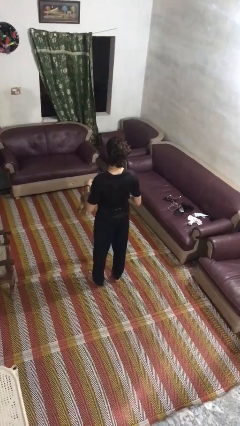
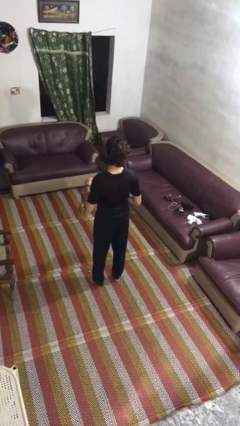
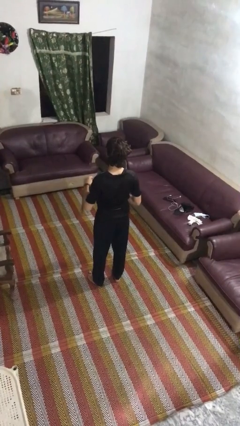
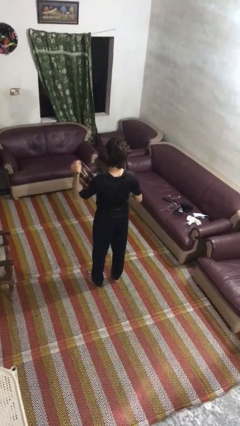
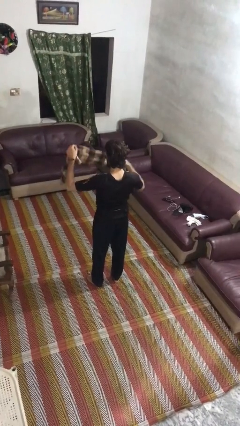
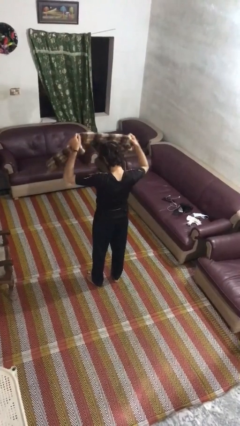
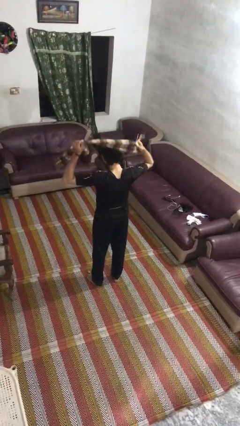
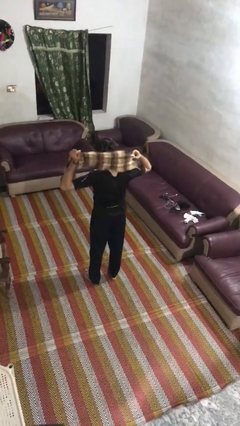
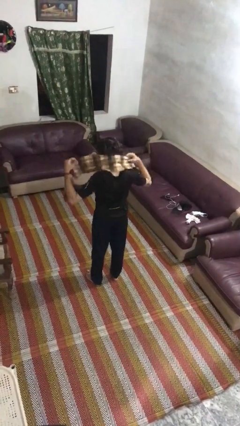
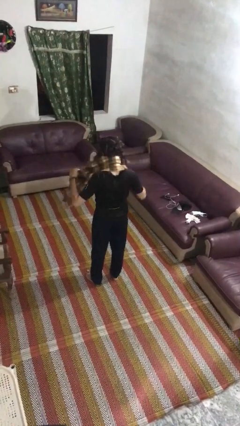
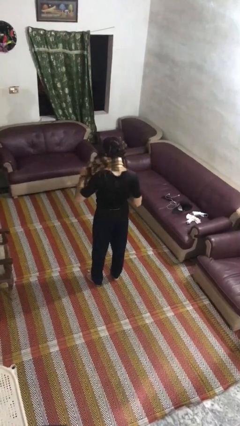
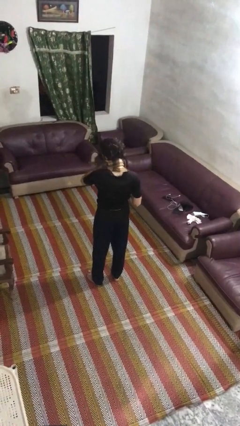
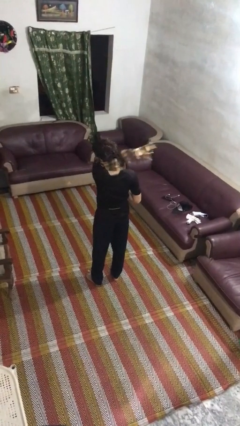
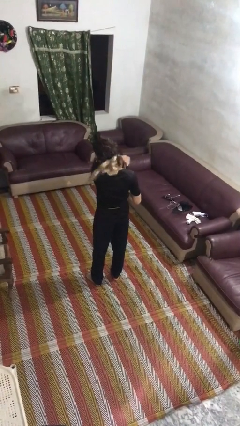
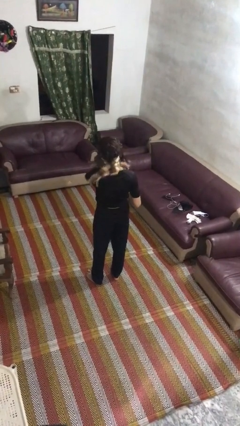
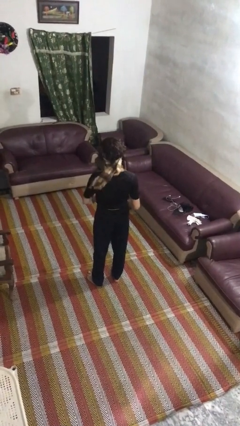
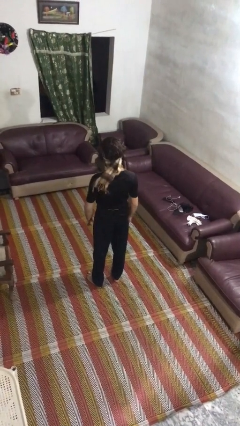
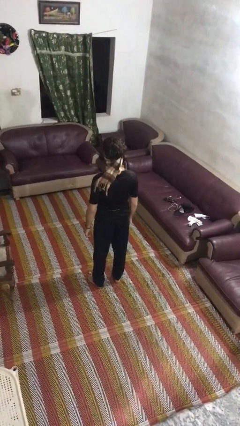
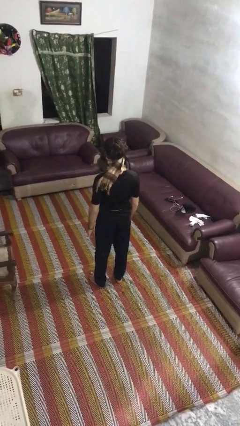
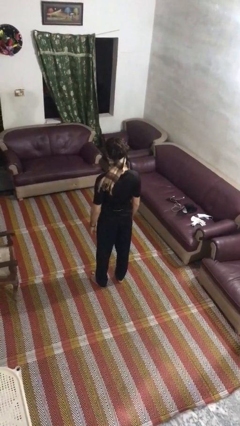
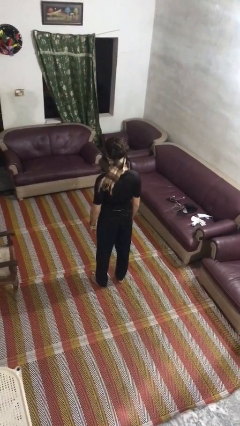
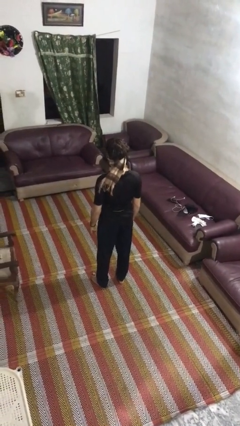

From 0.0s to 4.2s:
person puts on scarf

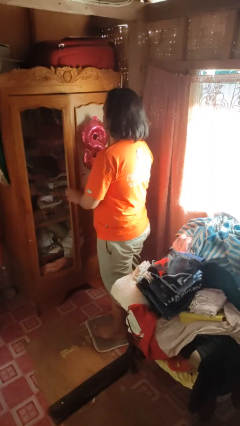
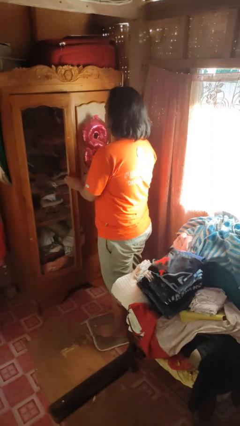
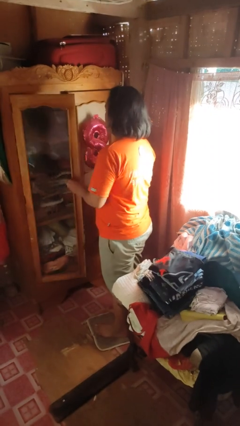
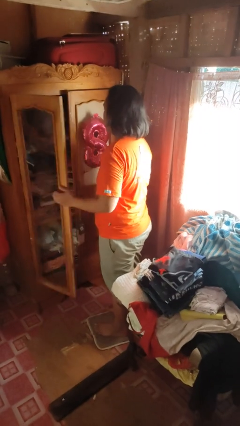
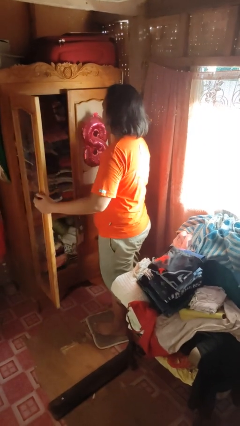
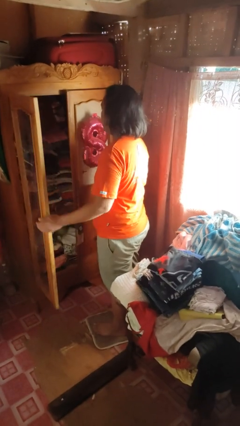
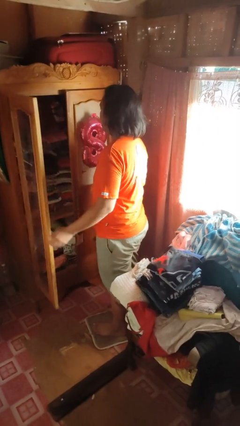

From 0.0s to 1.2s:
person opens dresser drawer

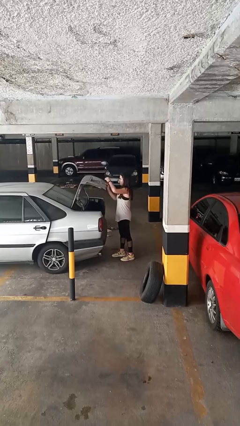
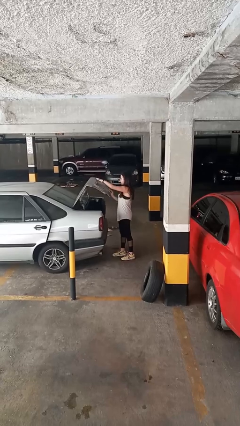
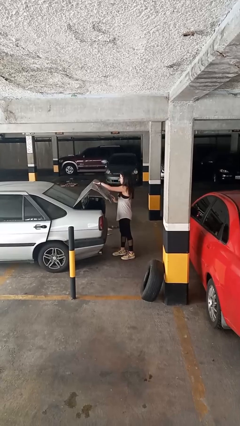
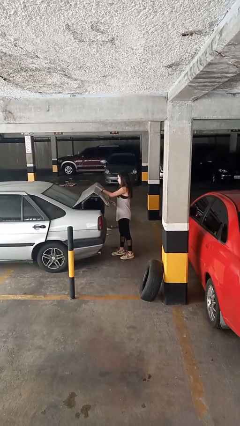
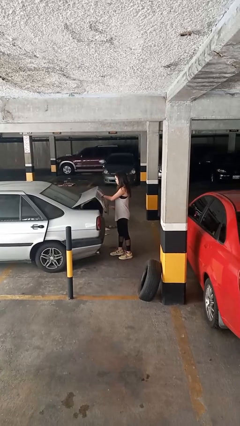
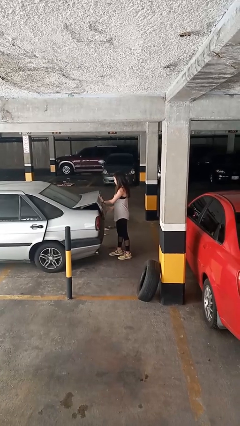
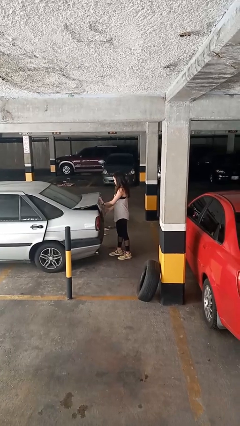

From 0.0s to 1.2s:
person closes car trunk

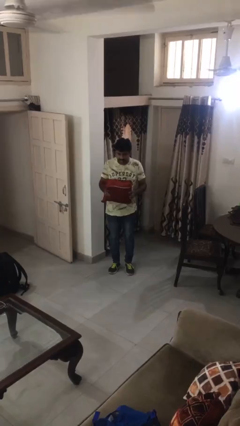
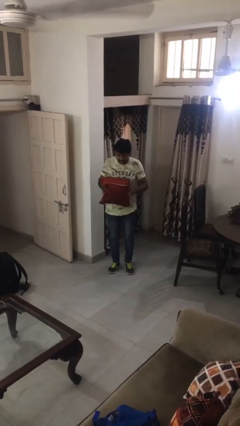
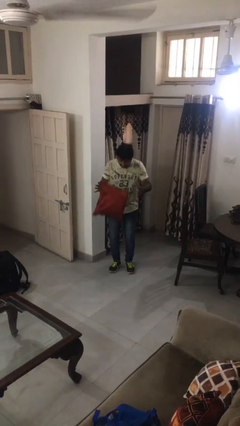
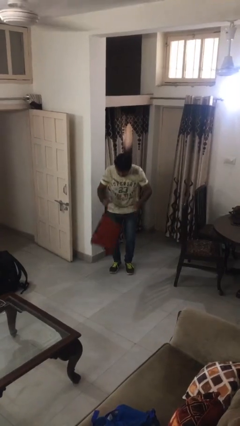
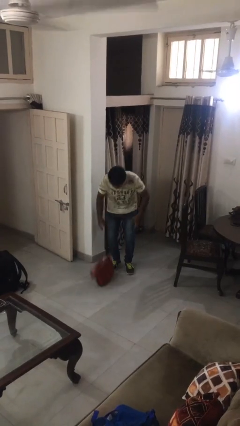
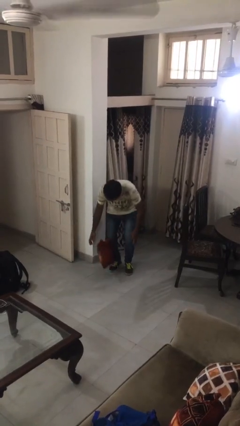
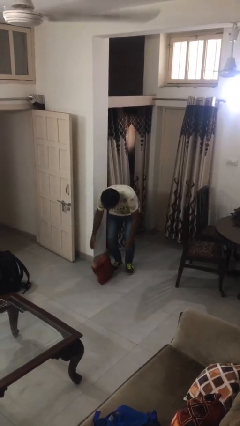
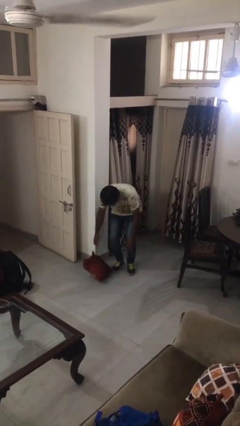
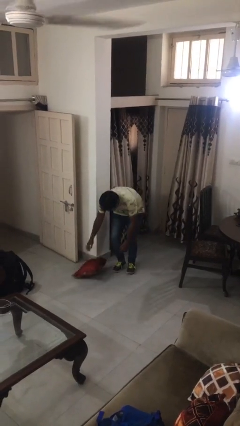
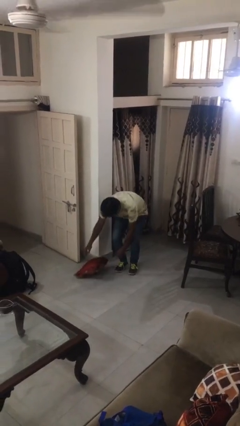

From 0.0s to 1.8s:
person drops object

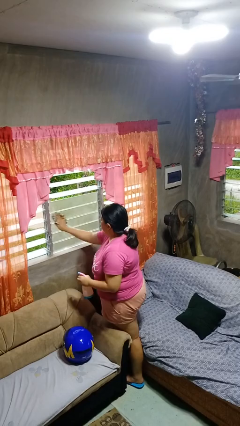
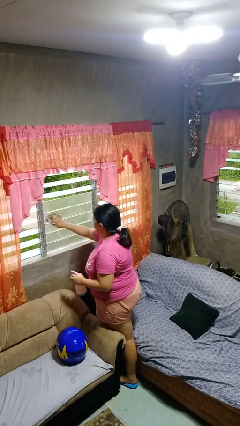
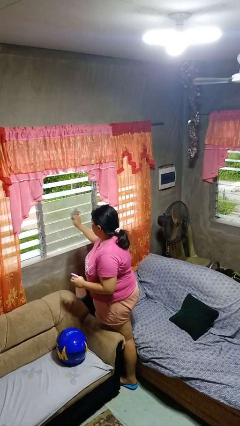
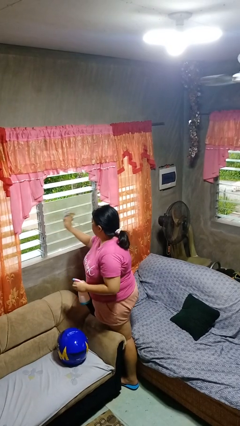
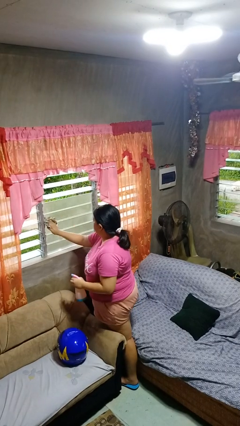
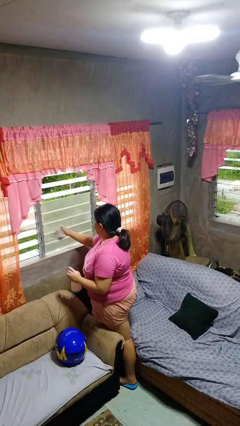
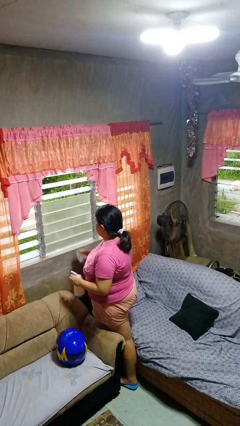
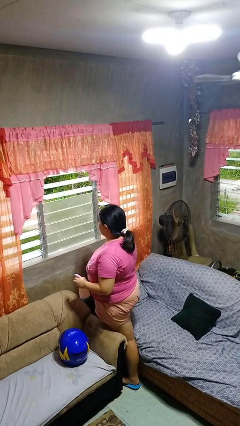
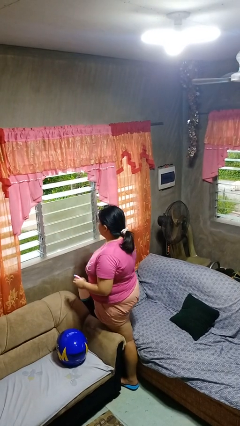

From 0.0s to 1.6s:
person washes window

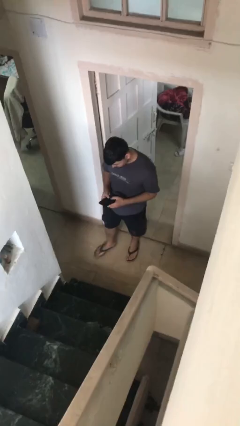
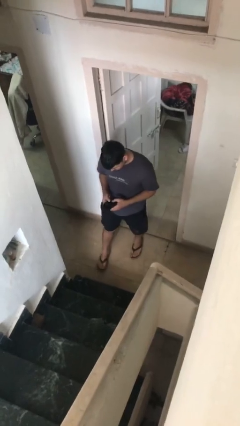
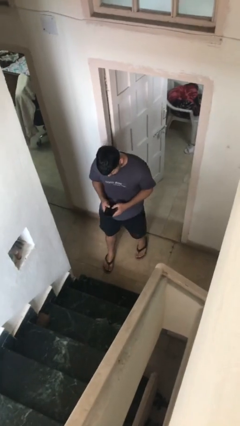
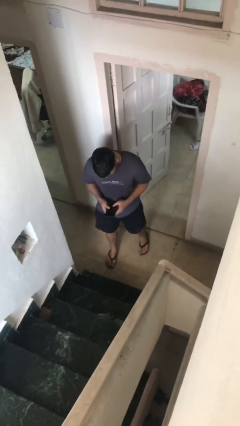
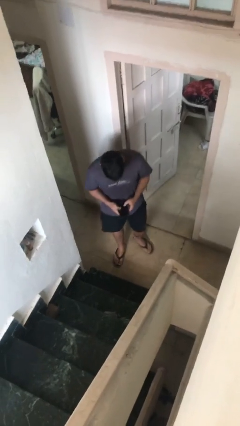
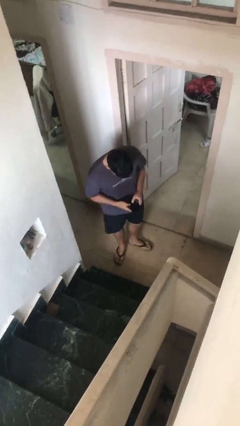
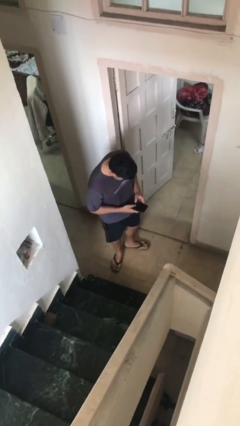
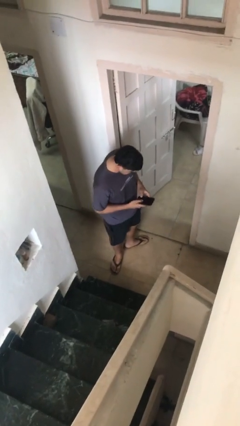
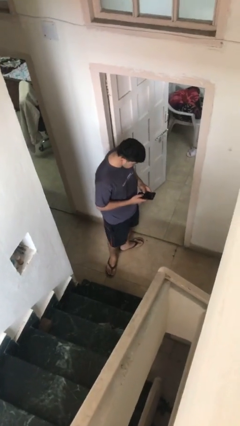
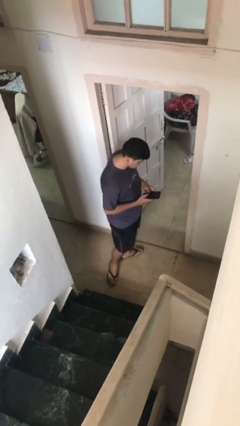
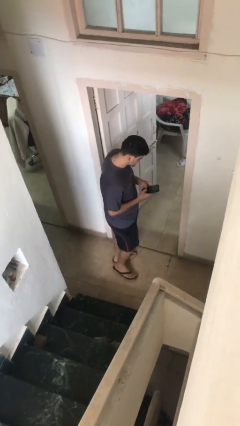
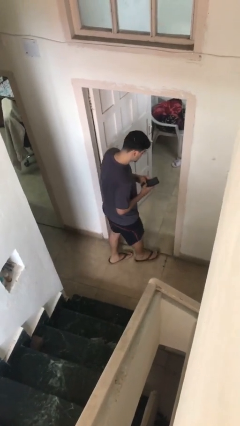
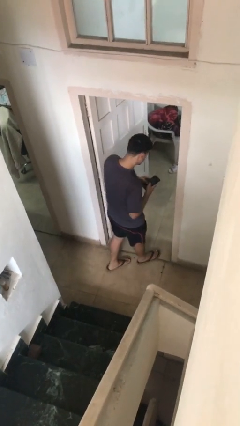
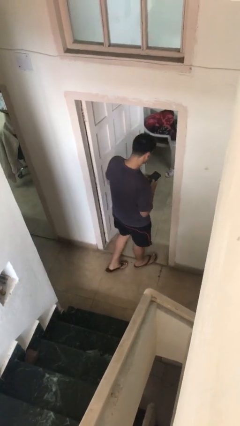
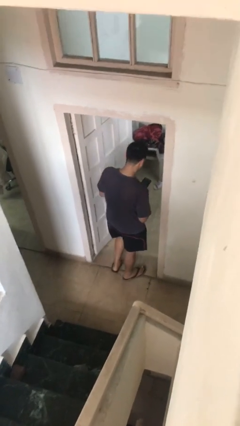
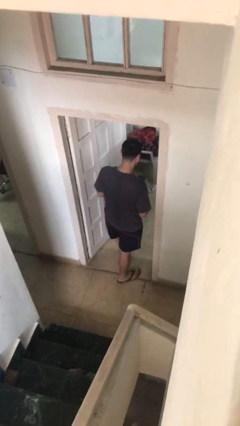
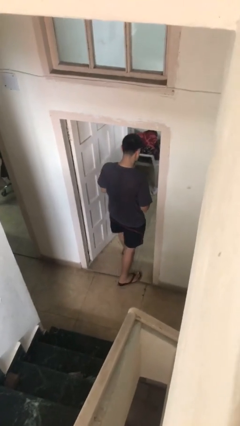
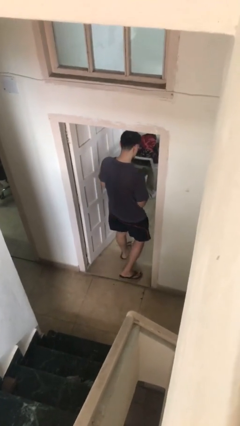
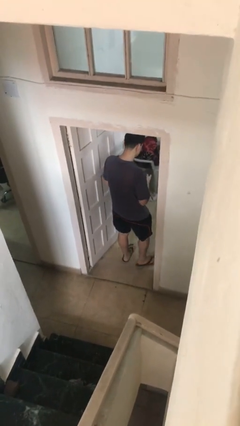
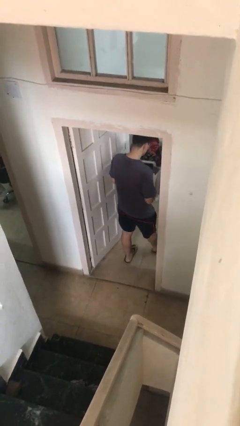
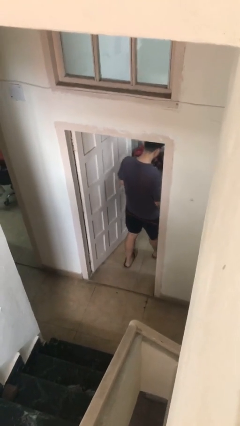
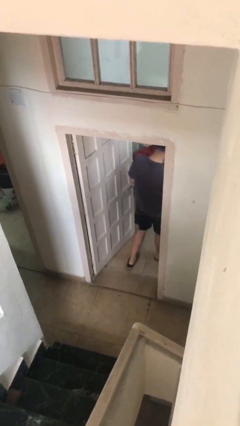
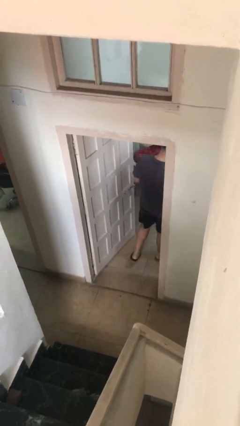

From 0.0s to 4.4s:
person exits scene through structure

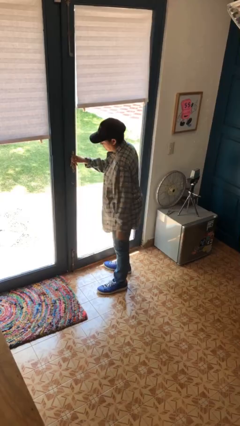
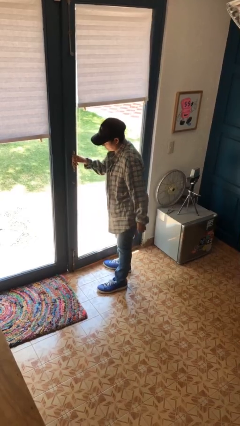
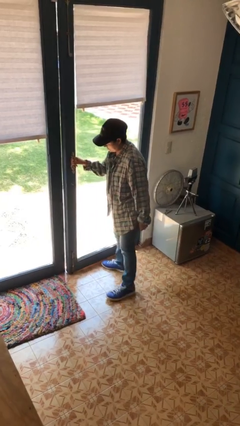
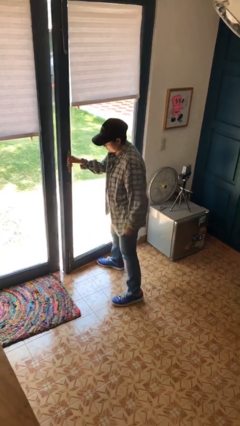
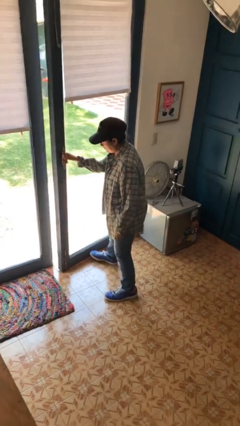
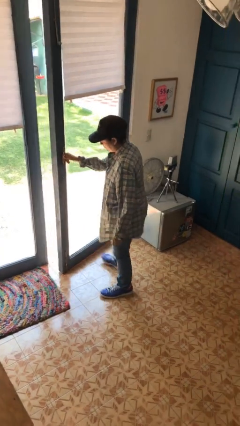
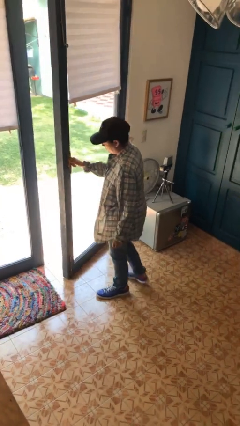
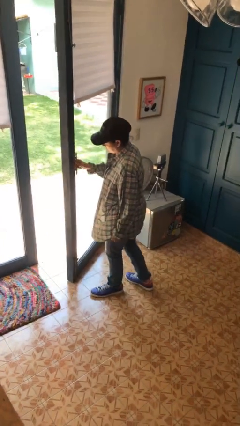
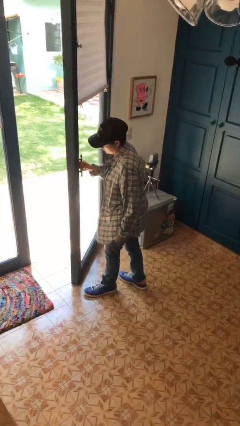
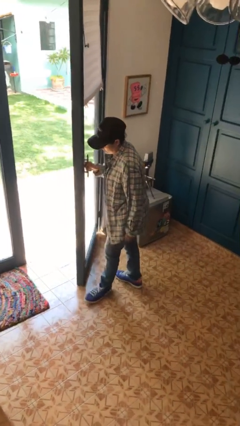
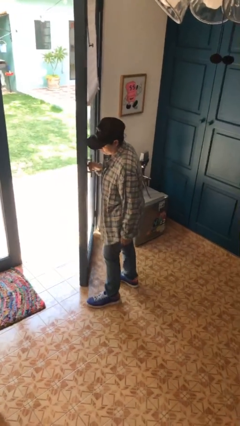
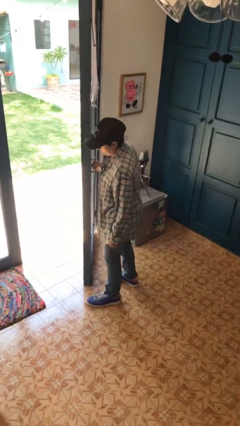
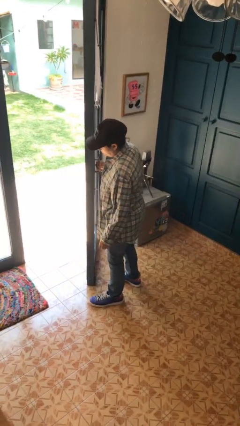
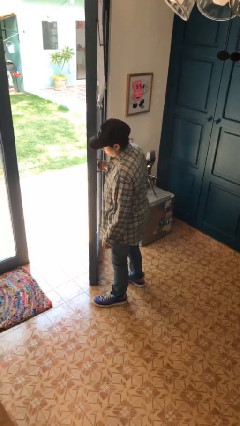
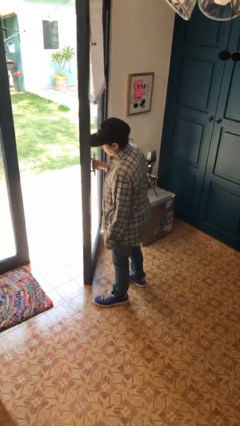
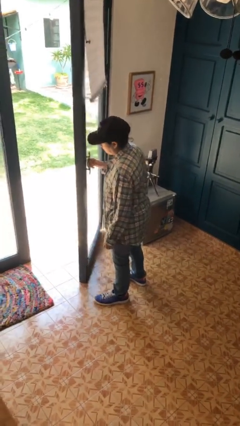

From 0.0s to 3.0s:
person opens facility door

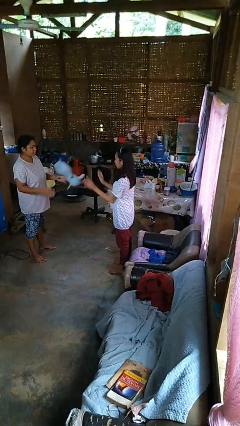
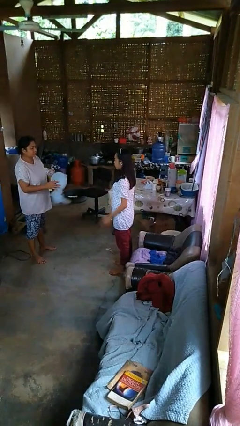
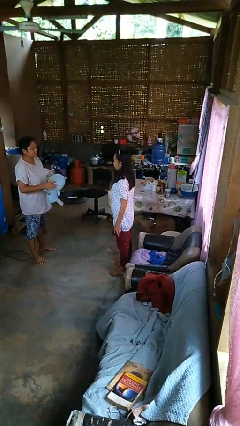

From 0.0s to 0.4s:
person throws object to person
